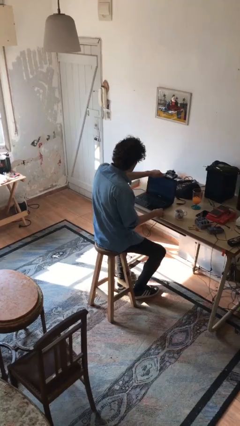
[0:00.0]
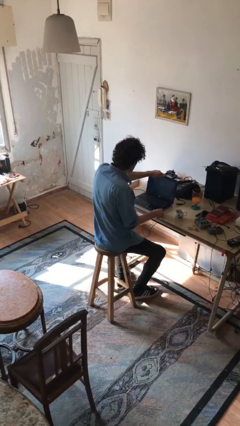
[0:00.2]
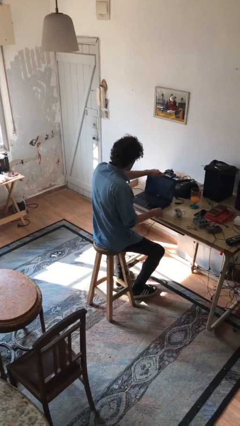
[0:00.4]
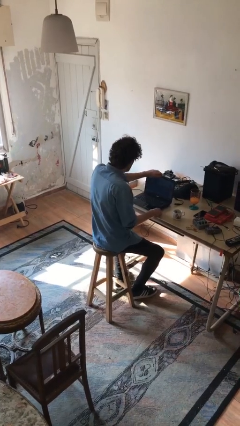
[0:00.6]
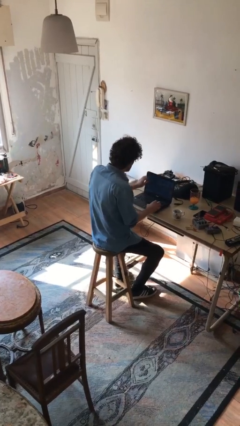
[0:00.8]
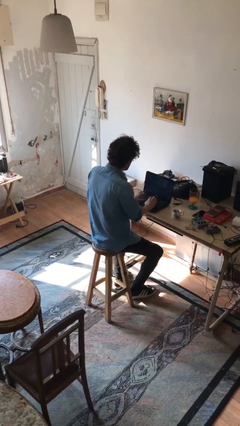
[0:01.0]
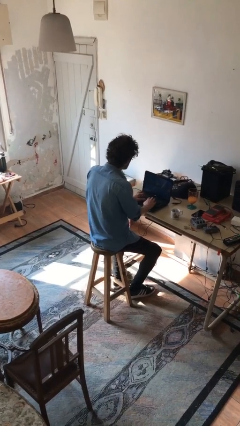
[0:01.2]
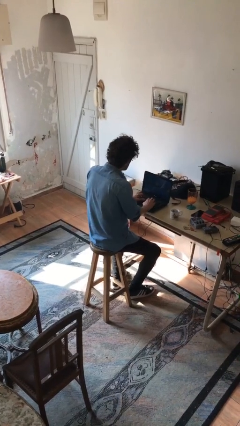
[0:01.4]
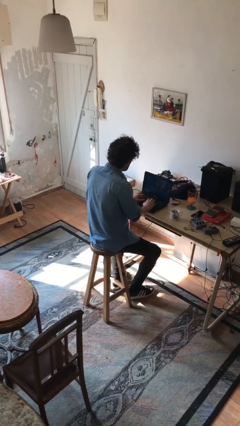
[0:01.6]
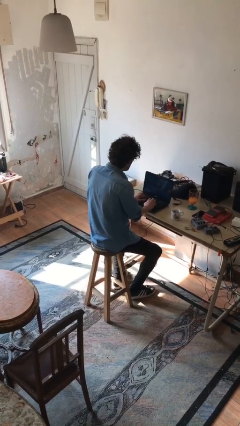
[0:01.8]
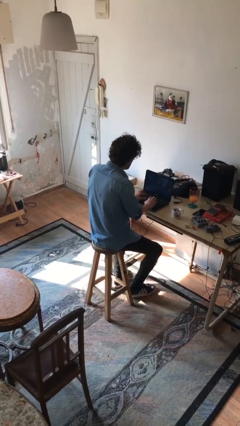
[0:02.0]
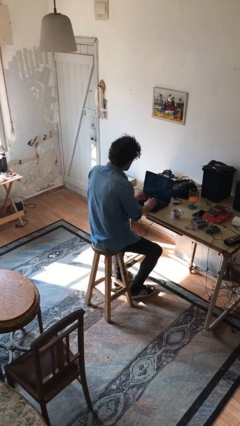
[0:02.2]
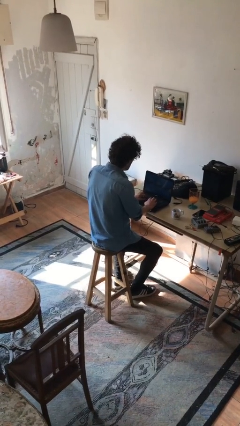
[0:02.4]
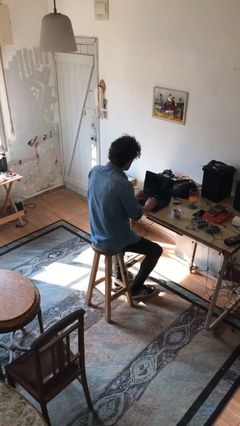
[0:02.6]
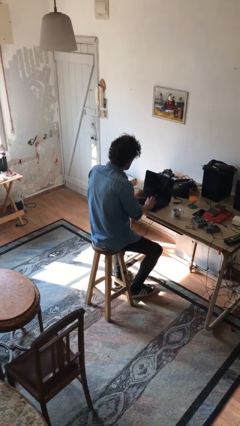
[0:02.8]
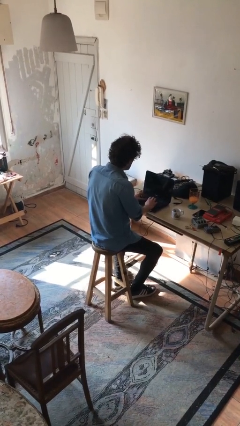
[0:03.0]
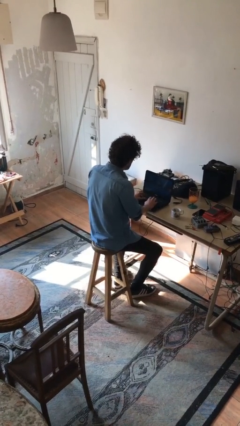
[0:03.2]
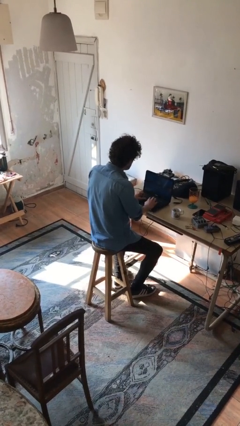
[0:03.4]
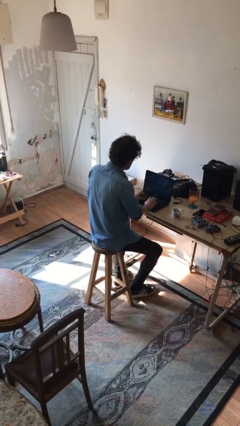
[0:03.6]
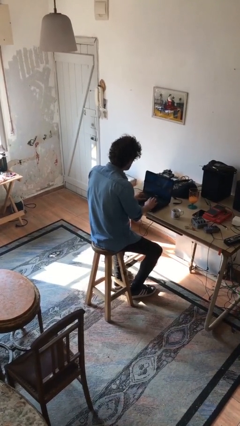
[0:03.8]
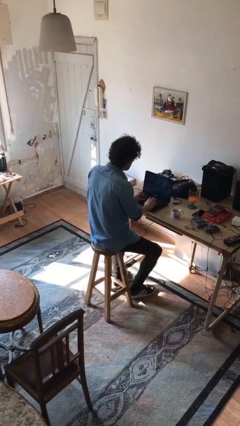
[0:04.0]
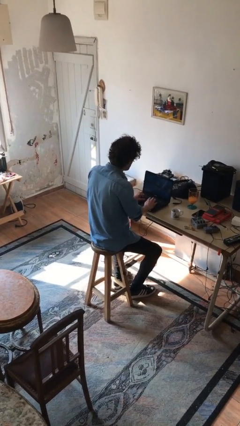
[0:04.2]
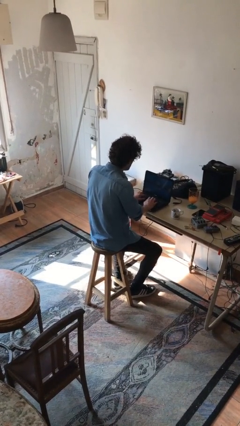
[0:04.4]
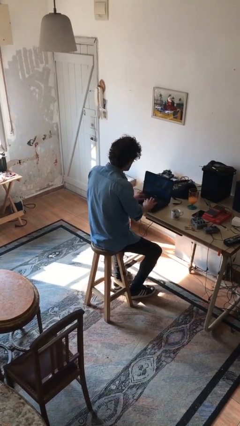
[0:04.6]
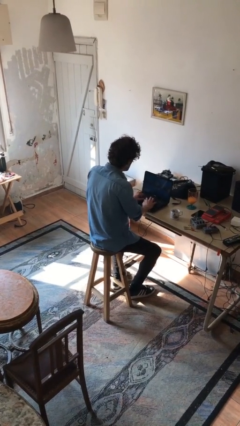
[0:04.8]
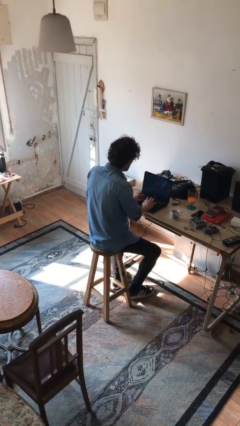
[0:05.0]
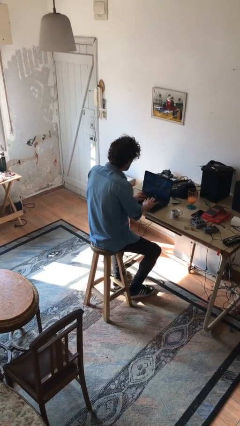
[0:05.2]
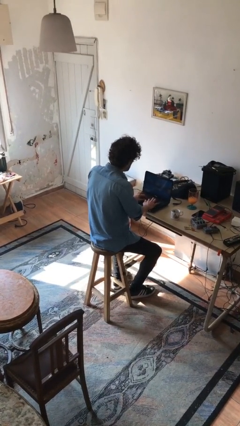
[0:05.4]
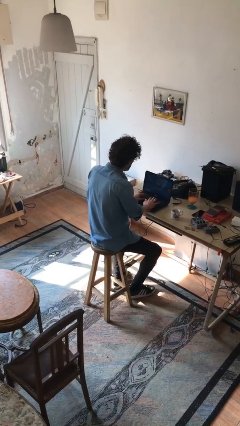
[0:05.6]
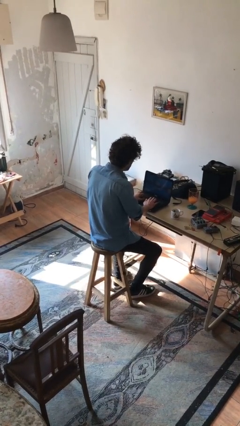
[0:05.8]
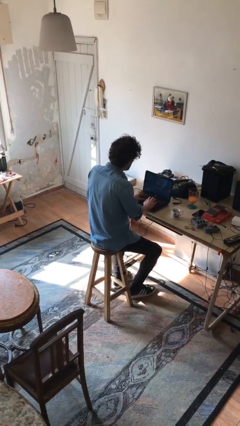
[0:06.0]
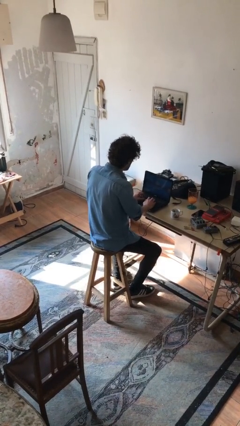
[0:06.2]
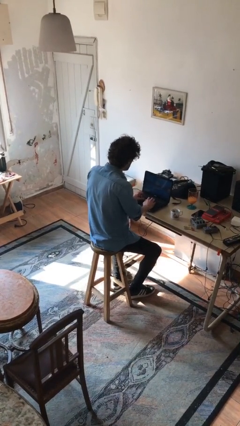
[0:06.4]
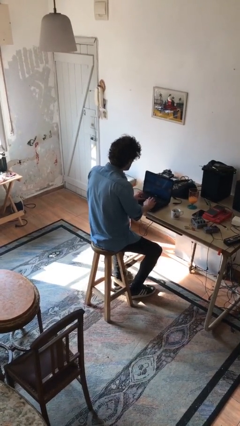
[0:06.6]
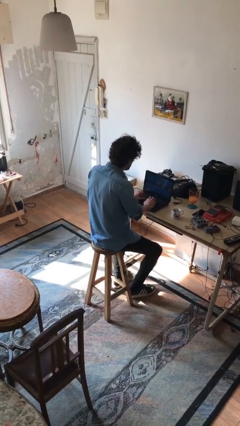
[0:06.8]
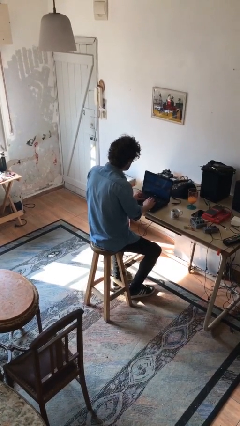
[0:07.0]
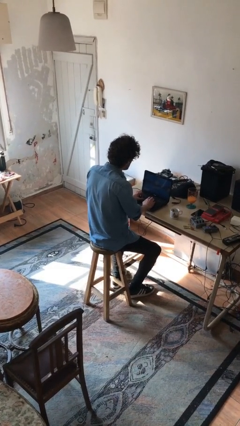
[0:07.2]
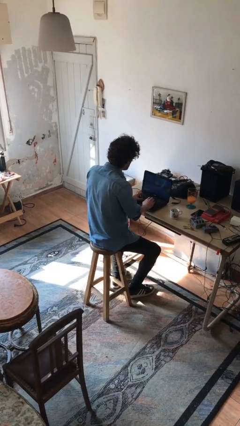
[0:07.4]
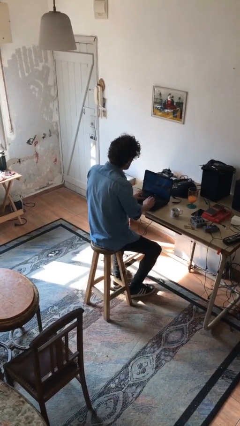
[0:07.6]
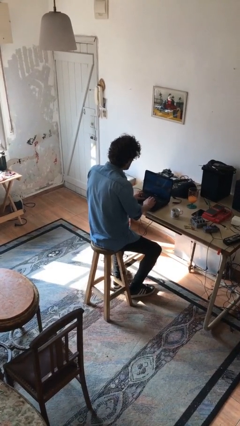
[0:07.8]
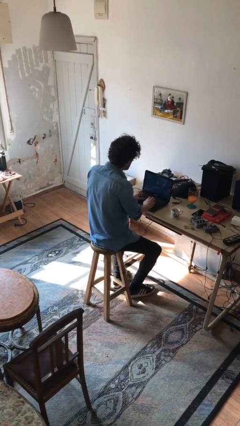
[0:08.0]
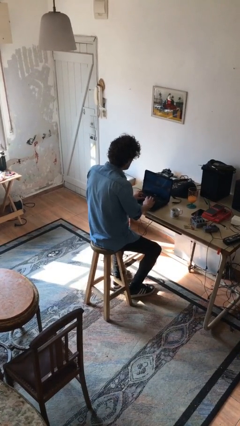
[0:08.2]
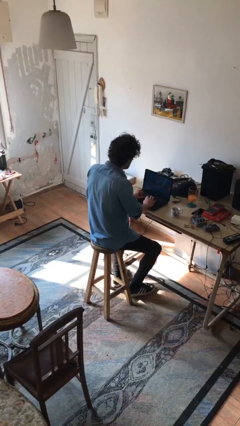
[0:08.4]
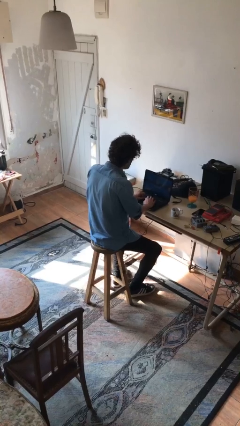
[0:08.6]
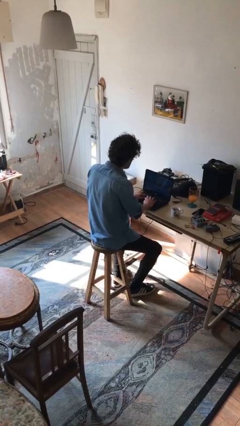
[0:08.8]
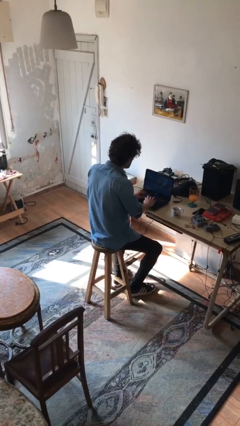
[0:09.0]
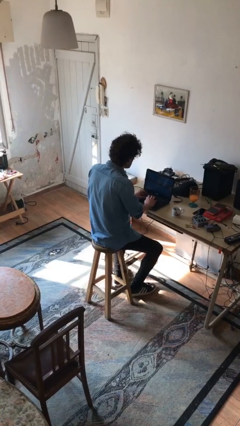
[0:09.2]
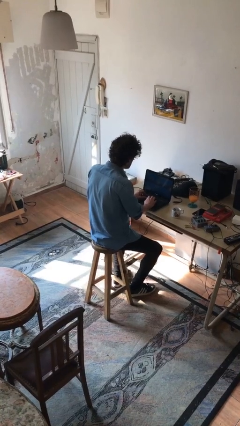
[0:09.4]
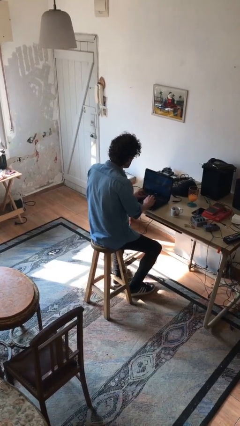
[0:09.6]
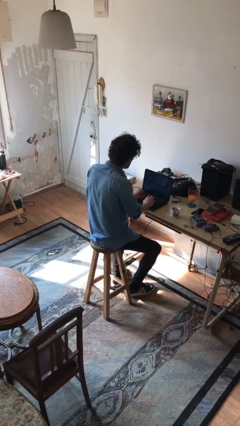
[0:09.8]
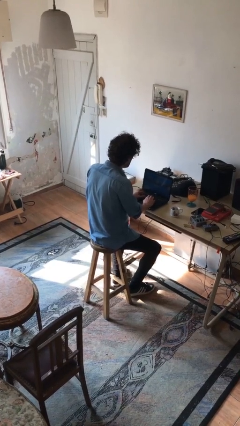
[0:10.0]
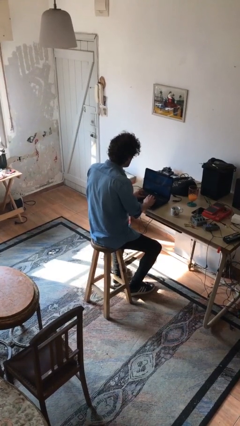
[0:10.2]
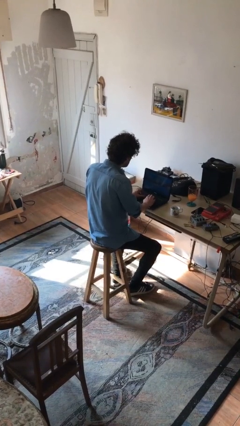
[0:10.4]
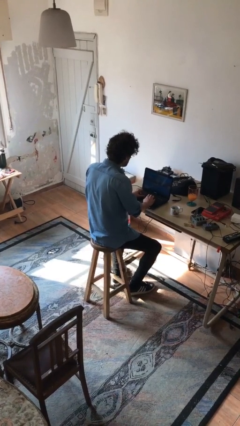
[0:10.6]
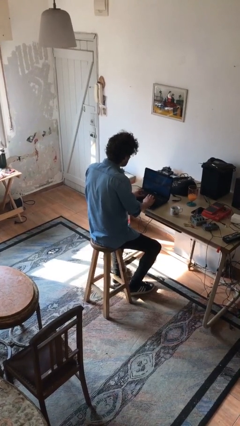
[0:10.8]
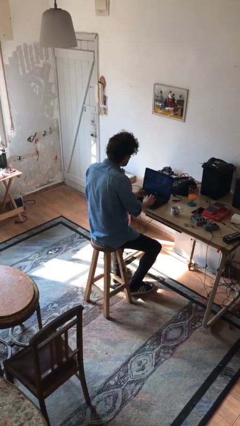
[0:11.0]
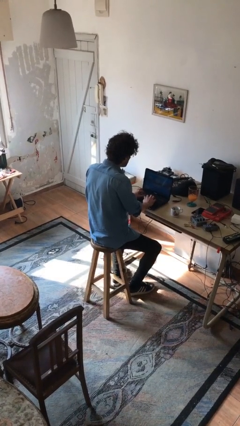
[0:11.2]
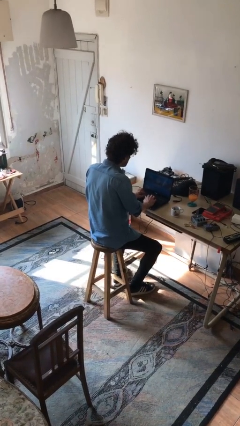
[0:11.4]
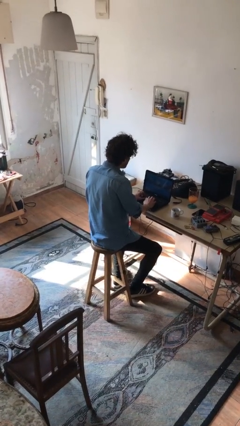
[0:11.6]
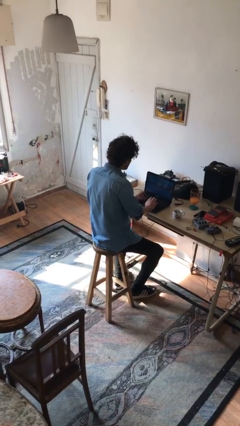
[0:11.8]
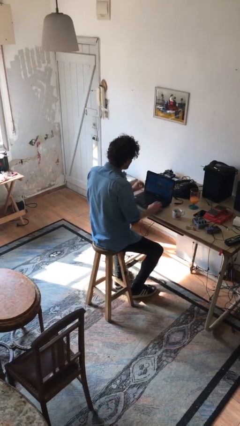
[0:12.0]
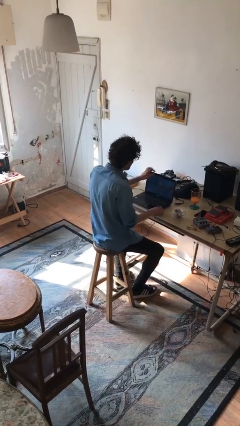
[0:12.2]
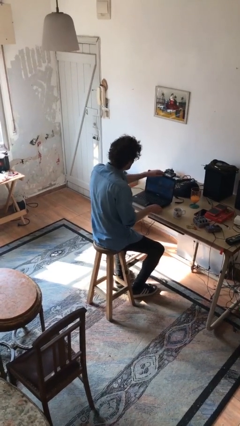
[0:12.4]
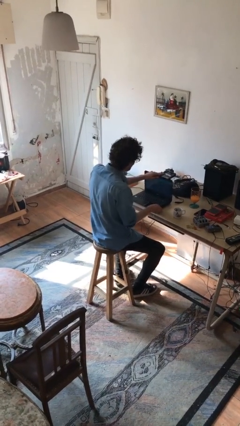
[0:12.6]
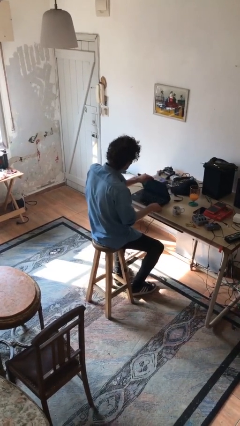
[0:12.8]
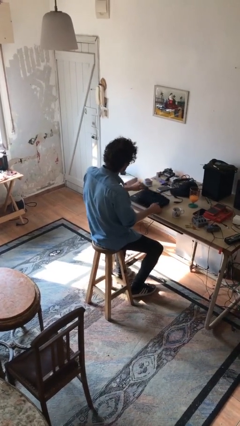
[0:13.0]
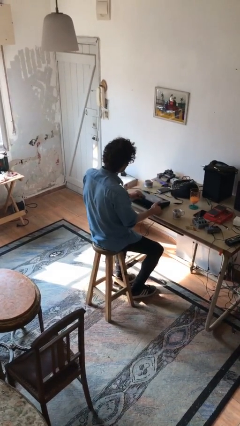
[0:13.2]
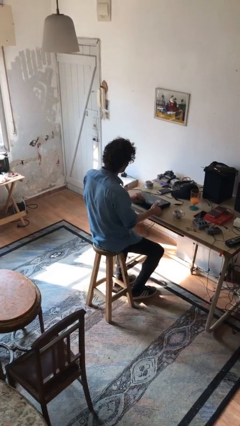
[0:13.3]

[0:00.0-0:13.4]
person interacts with laptop

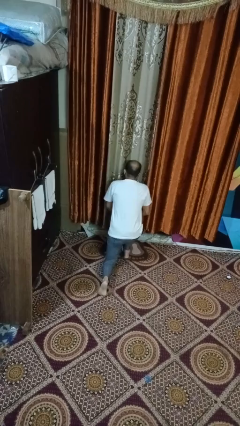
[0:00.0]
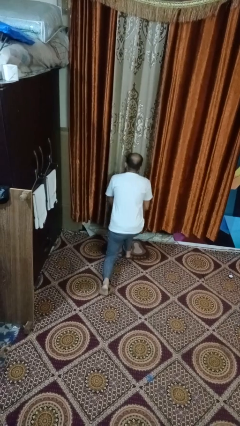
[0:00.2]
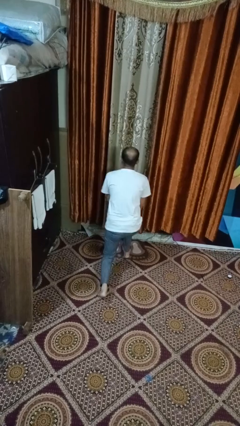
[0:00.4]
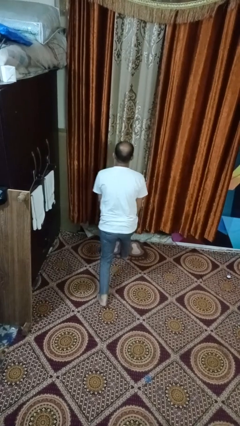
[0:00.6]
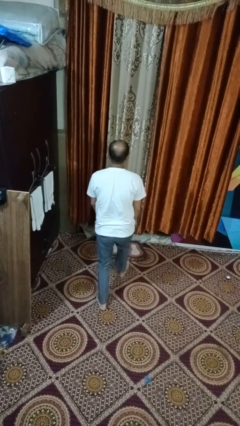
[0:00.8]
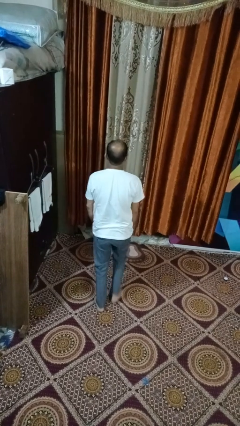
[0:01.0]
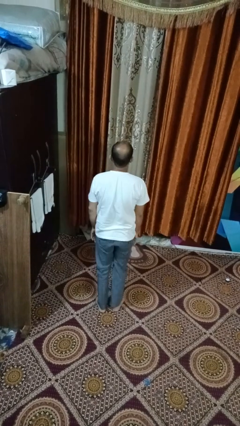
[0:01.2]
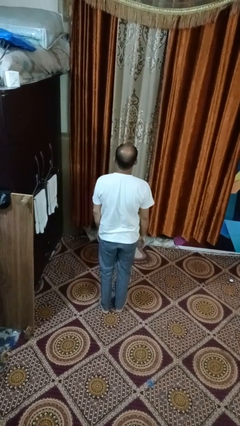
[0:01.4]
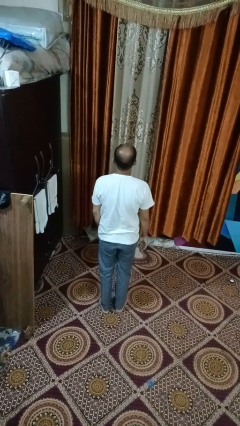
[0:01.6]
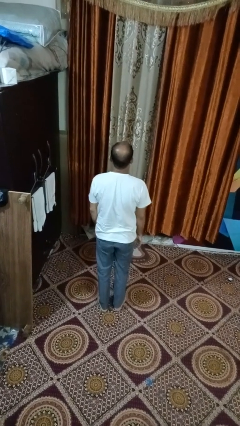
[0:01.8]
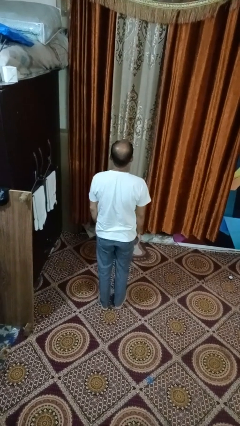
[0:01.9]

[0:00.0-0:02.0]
person stands up from floor

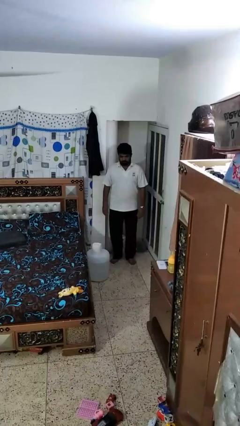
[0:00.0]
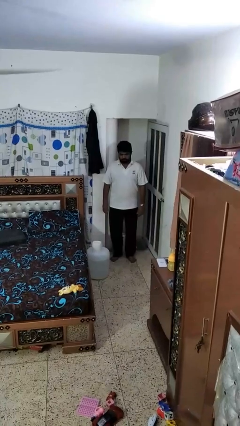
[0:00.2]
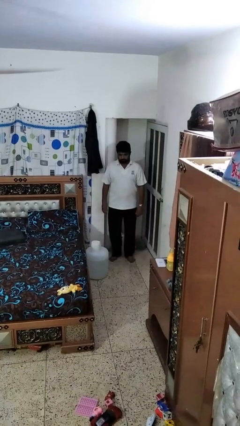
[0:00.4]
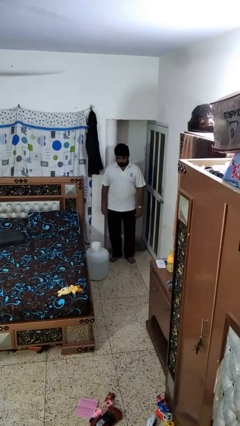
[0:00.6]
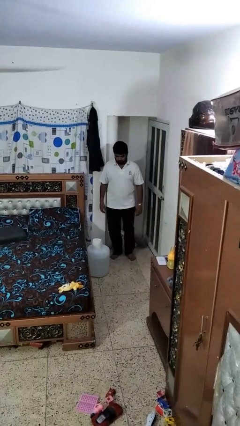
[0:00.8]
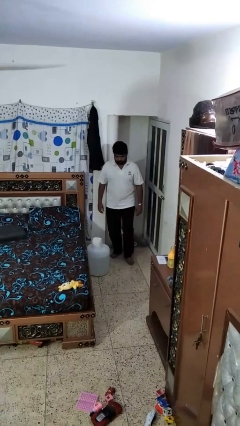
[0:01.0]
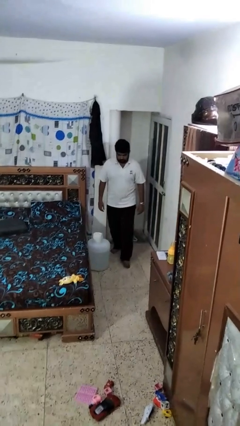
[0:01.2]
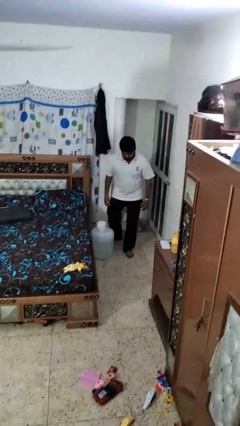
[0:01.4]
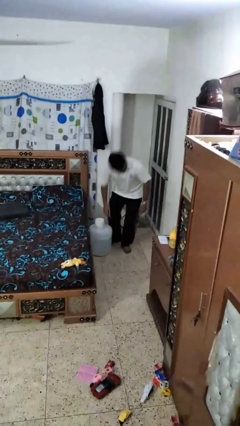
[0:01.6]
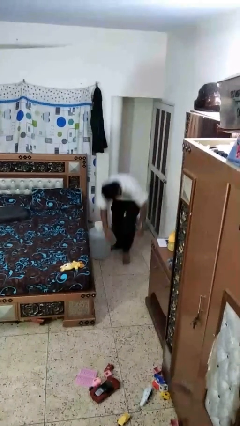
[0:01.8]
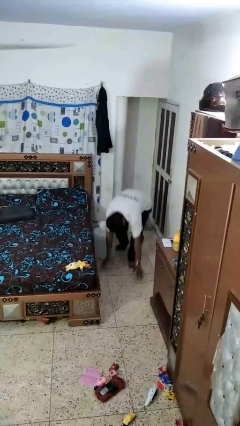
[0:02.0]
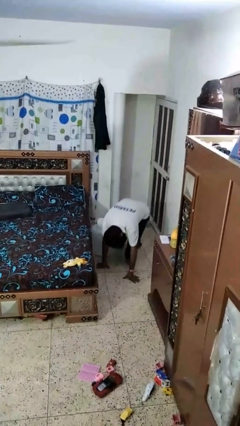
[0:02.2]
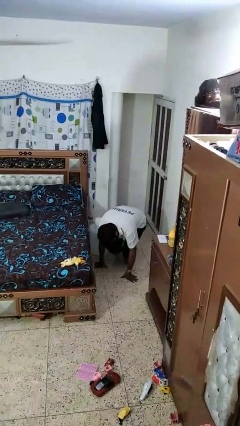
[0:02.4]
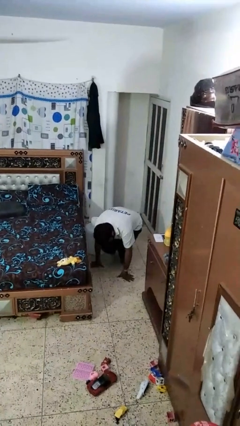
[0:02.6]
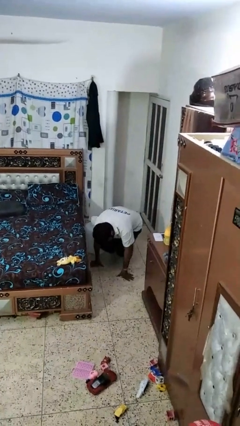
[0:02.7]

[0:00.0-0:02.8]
person trips on object on floor
